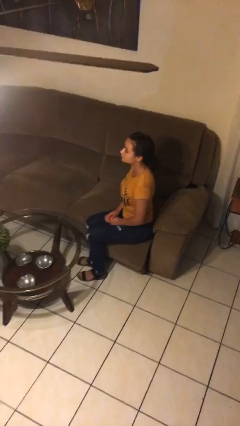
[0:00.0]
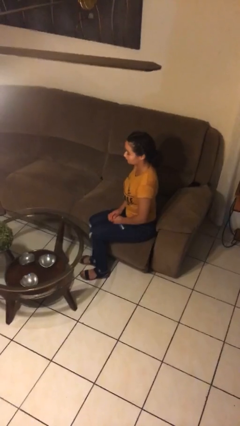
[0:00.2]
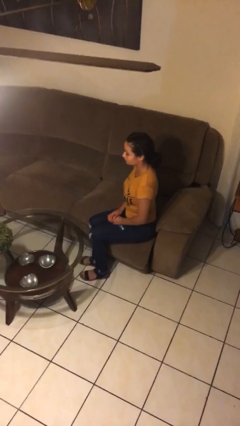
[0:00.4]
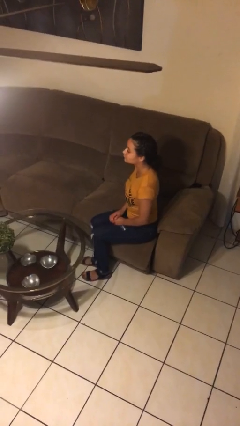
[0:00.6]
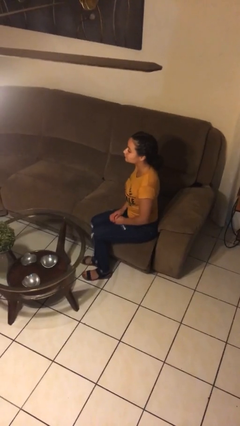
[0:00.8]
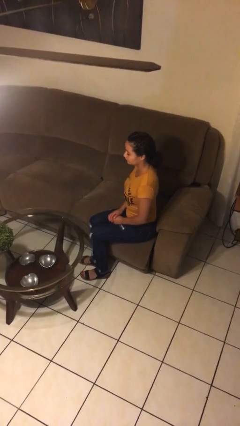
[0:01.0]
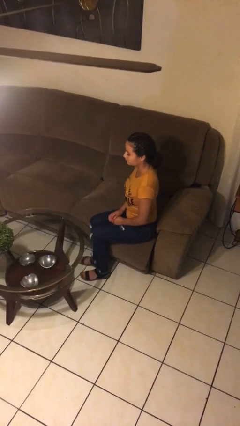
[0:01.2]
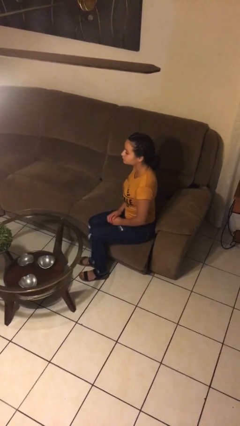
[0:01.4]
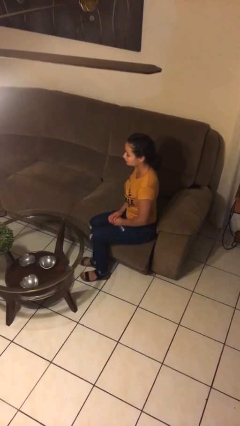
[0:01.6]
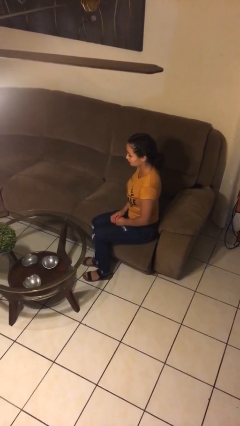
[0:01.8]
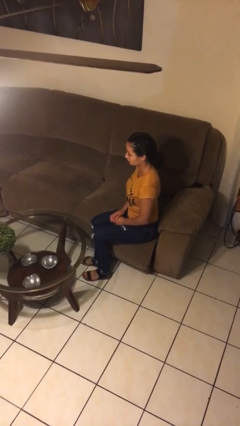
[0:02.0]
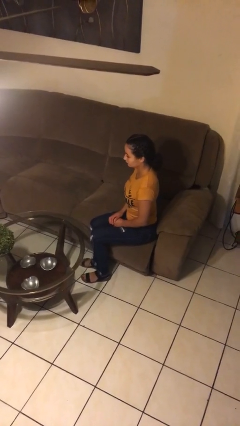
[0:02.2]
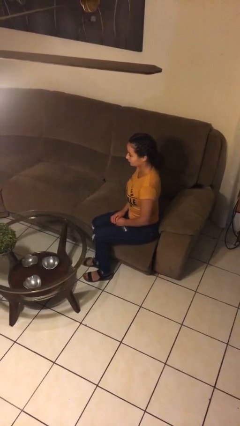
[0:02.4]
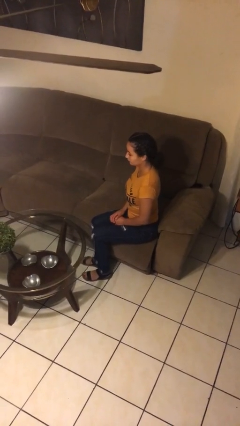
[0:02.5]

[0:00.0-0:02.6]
person nods head

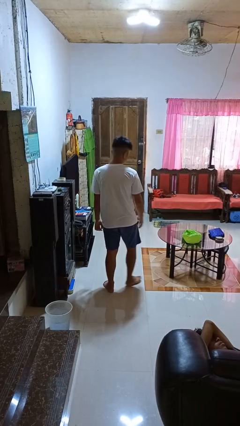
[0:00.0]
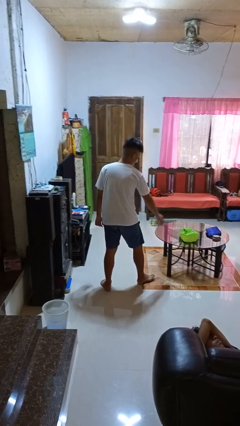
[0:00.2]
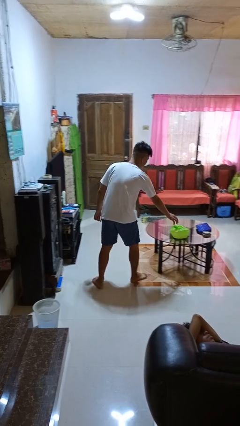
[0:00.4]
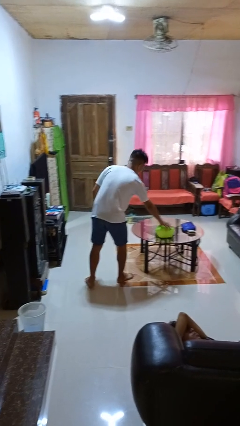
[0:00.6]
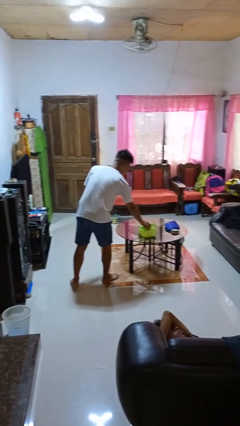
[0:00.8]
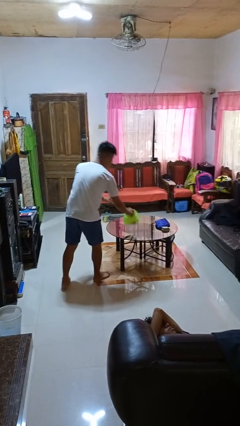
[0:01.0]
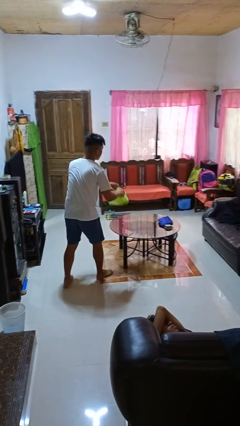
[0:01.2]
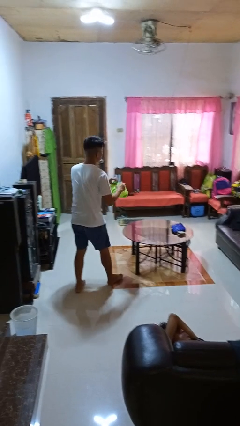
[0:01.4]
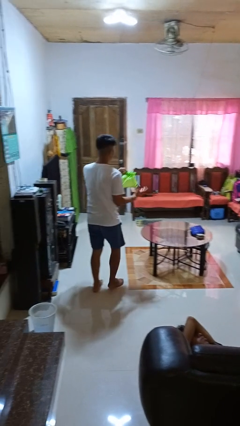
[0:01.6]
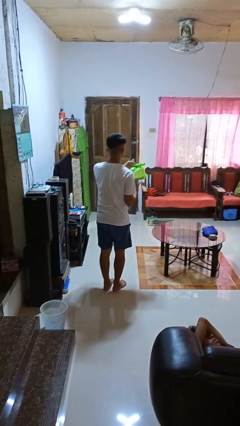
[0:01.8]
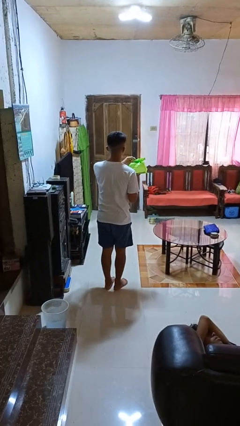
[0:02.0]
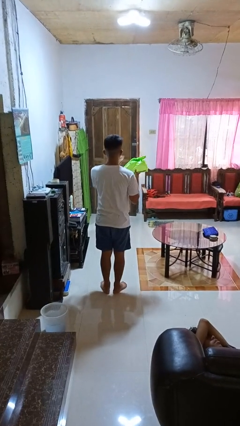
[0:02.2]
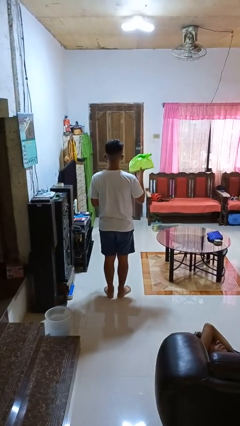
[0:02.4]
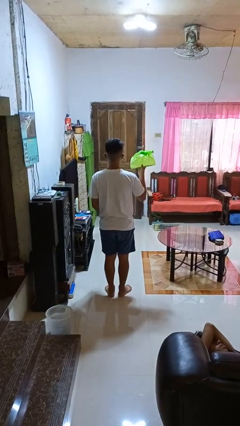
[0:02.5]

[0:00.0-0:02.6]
person picks up object from table

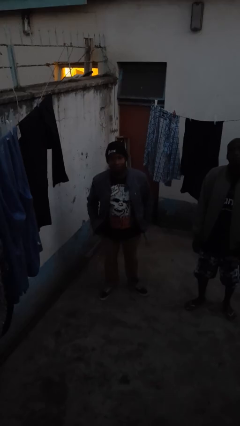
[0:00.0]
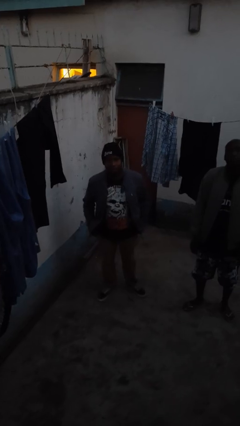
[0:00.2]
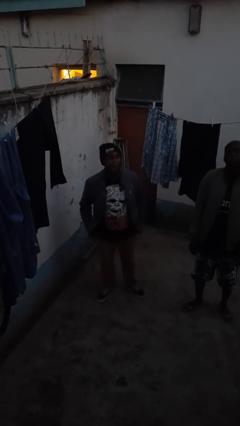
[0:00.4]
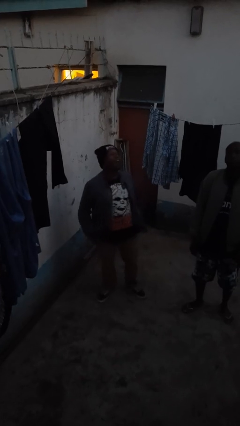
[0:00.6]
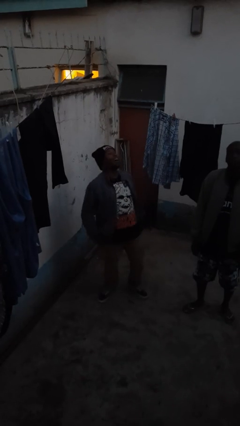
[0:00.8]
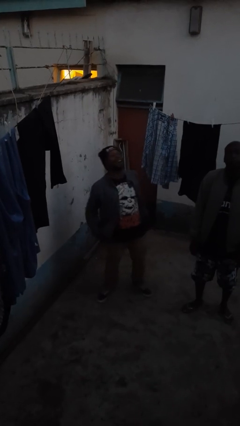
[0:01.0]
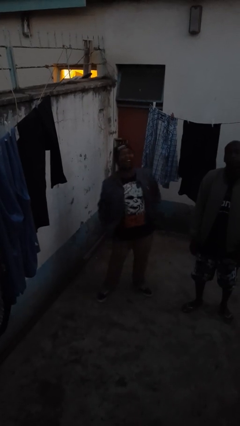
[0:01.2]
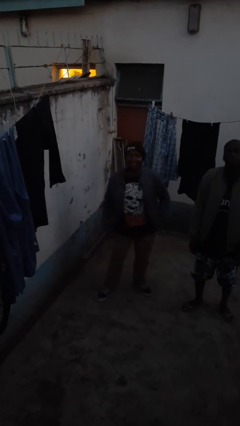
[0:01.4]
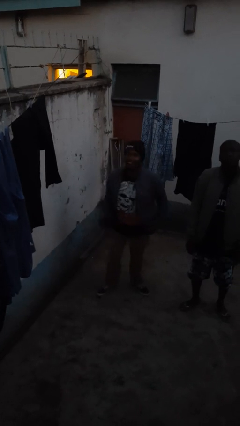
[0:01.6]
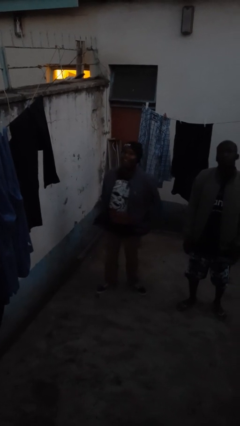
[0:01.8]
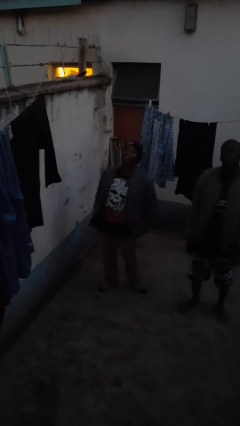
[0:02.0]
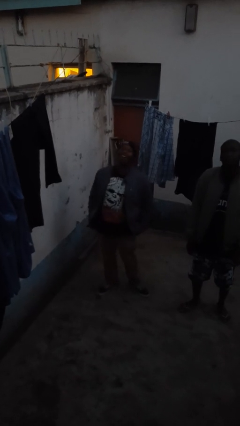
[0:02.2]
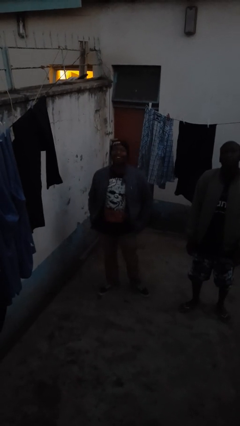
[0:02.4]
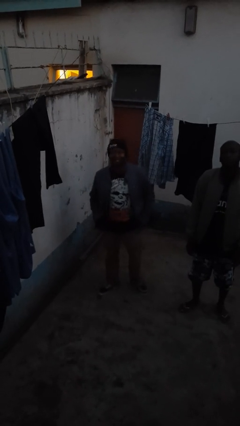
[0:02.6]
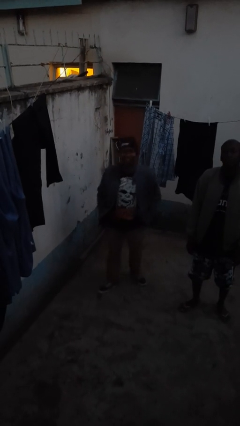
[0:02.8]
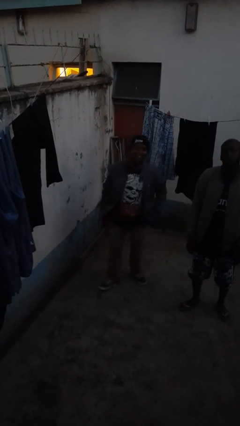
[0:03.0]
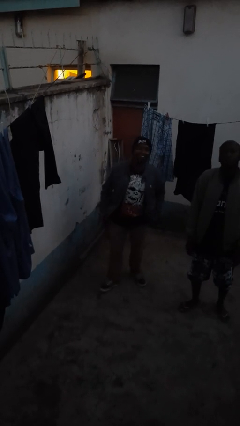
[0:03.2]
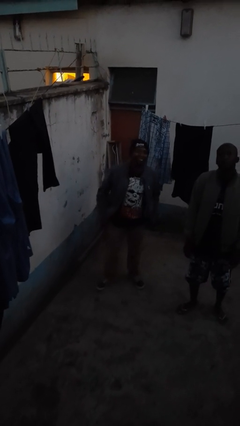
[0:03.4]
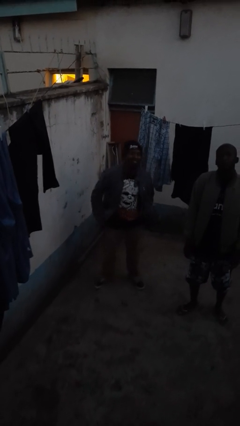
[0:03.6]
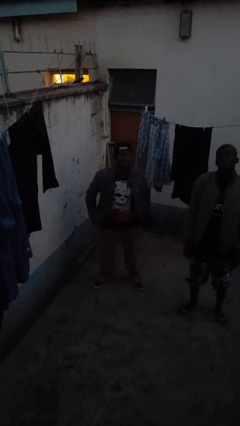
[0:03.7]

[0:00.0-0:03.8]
person laughs with person

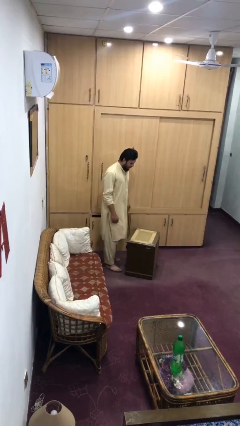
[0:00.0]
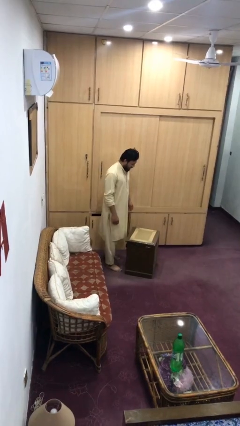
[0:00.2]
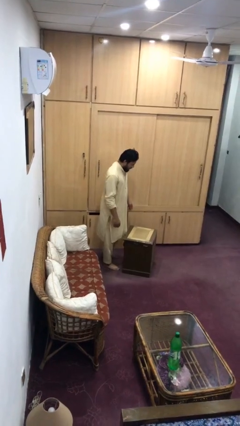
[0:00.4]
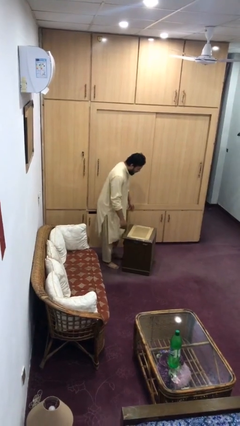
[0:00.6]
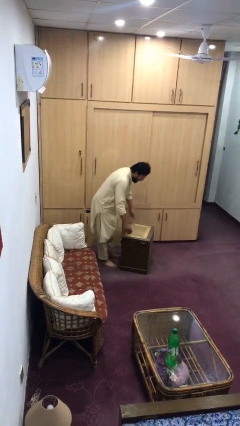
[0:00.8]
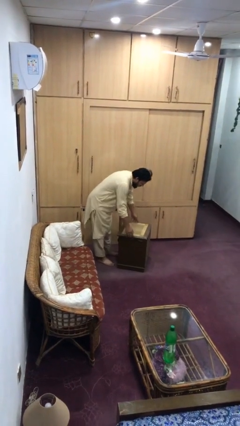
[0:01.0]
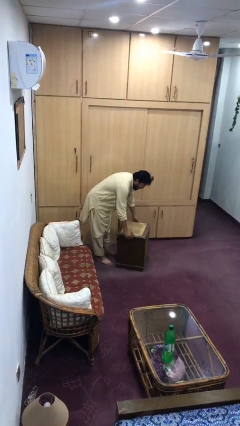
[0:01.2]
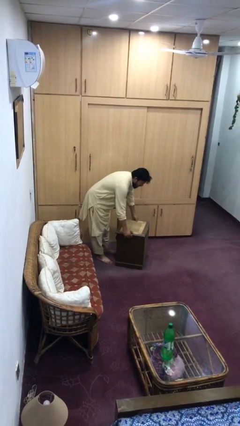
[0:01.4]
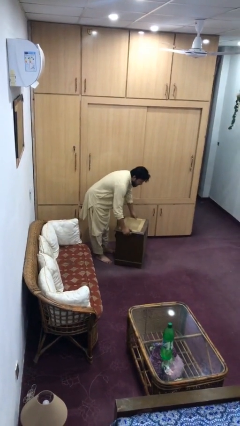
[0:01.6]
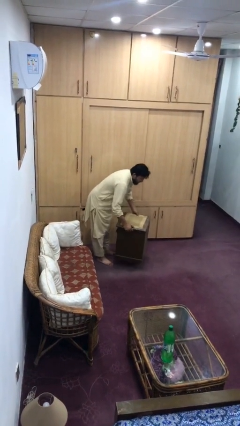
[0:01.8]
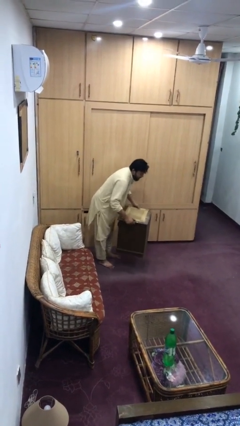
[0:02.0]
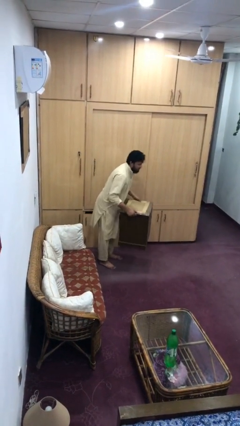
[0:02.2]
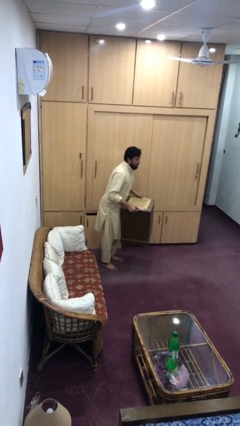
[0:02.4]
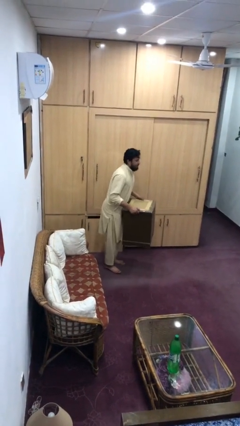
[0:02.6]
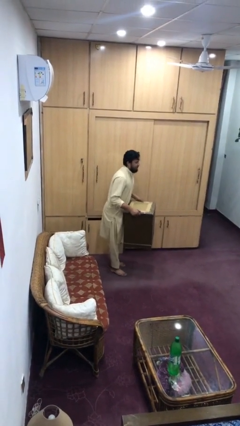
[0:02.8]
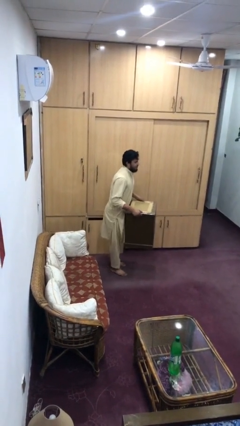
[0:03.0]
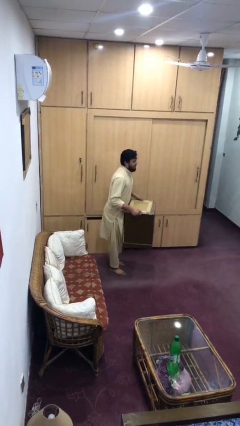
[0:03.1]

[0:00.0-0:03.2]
person picks up object from floor

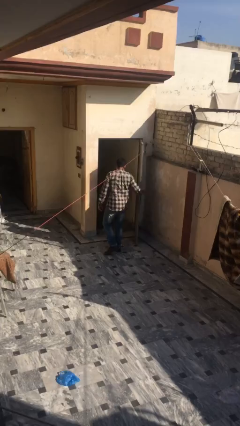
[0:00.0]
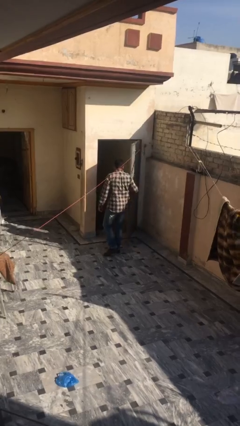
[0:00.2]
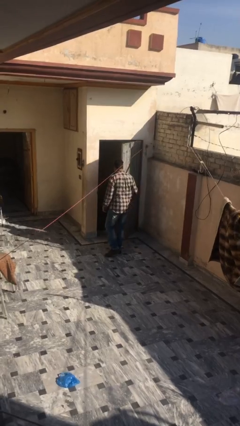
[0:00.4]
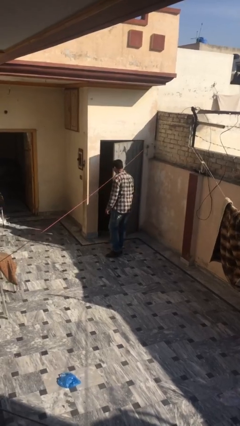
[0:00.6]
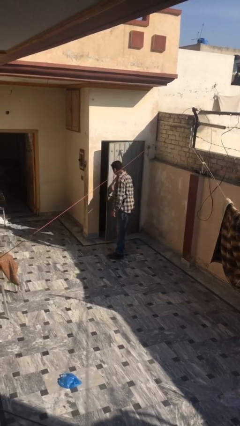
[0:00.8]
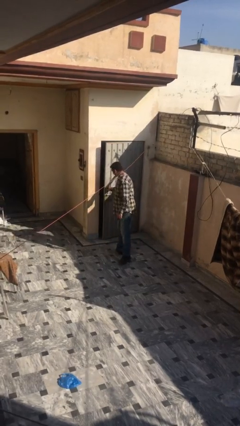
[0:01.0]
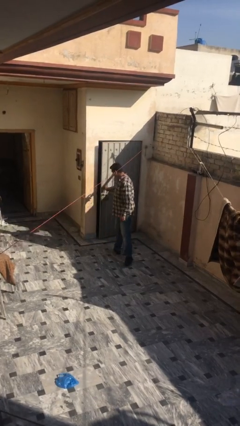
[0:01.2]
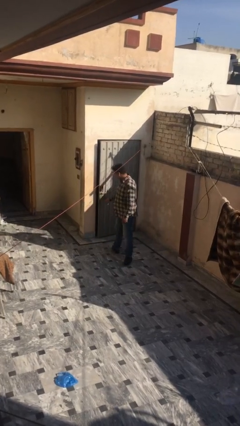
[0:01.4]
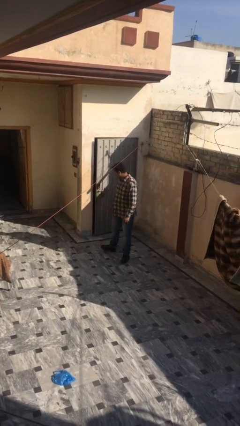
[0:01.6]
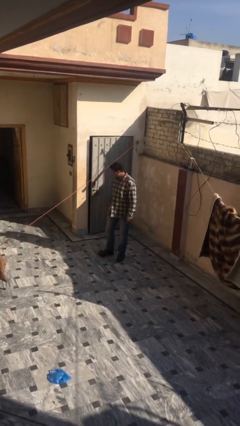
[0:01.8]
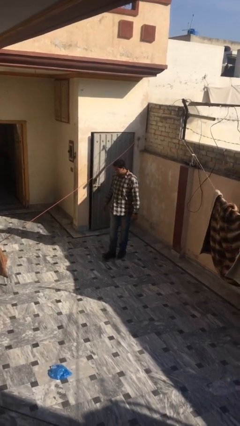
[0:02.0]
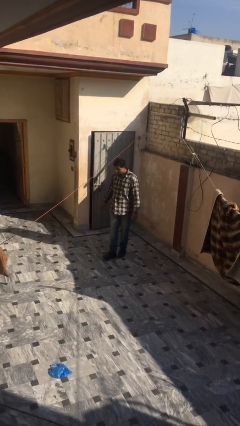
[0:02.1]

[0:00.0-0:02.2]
person closes facility door

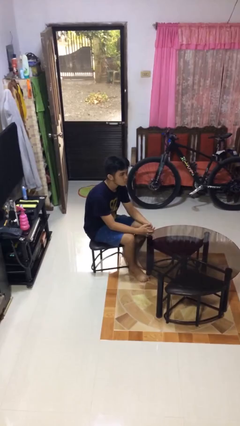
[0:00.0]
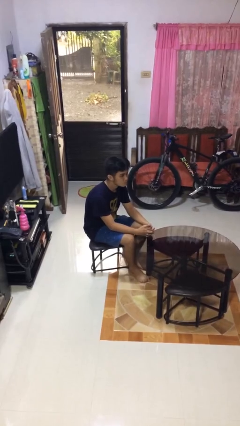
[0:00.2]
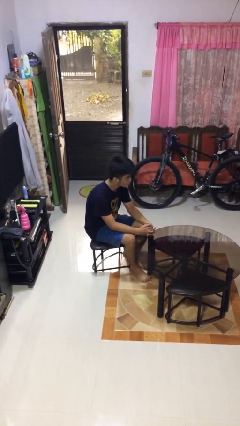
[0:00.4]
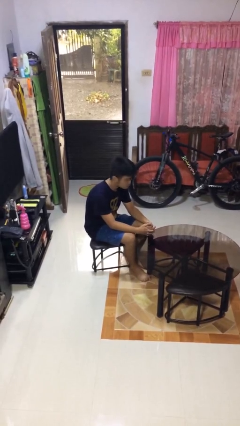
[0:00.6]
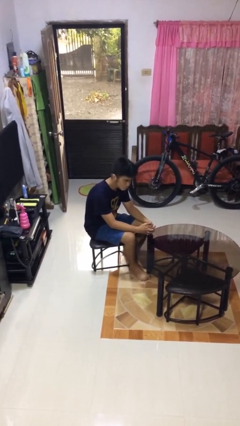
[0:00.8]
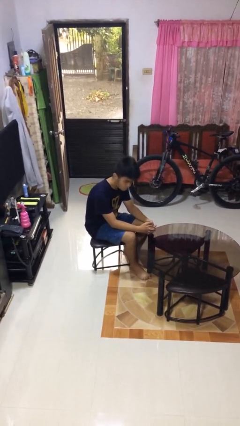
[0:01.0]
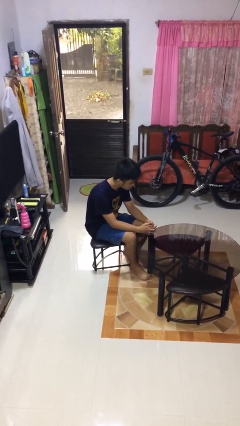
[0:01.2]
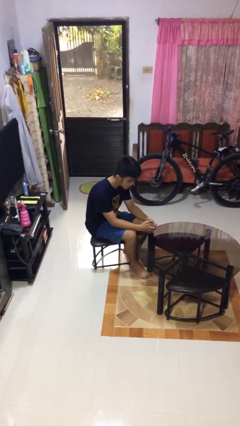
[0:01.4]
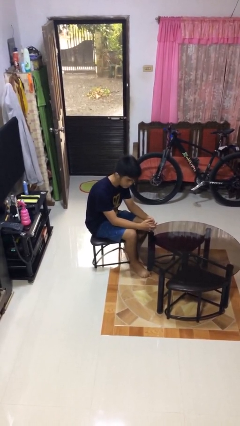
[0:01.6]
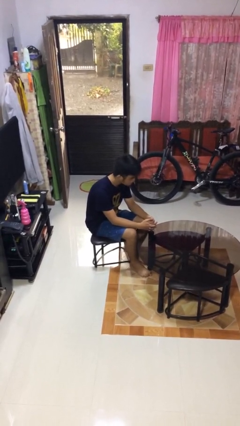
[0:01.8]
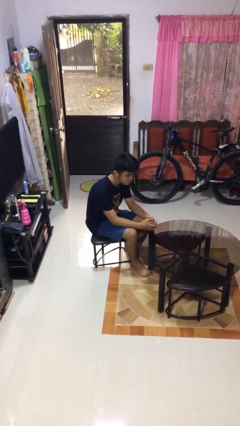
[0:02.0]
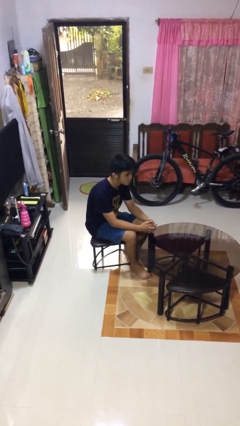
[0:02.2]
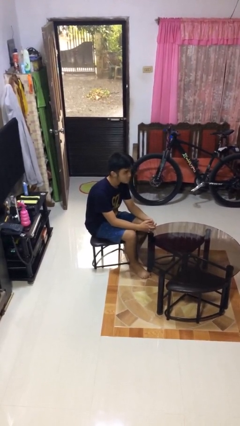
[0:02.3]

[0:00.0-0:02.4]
person shakes head

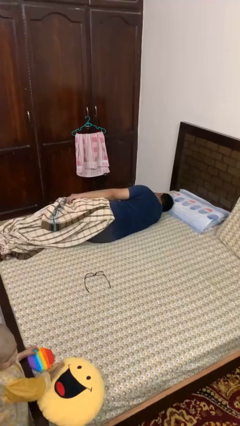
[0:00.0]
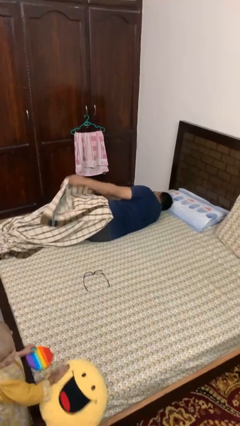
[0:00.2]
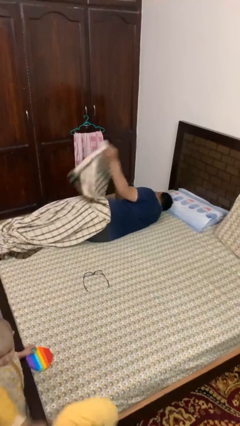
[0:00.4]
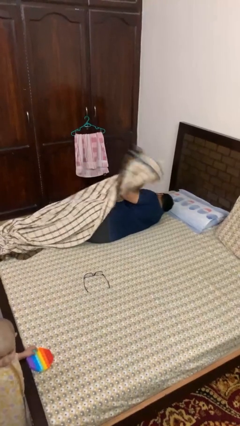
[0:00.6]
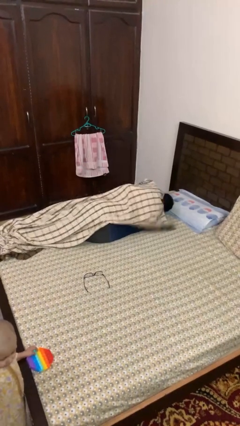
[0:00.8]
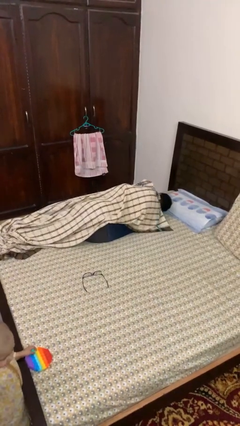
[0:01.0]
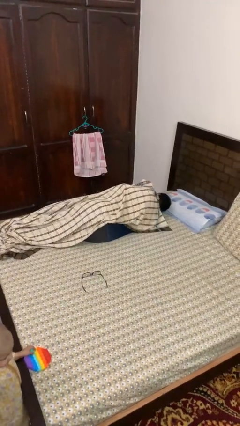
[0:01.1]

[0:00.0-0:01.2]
person covers with blanket
